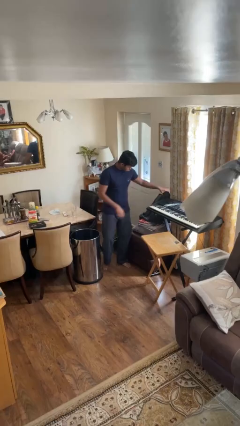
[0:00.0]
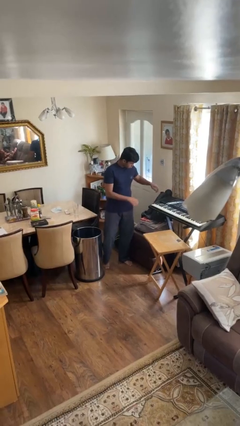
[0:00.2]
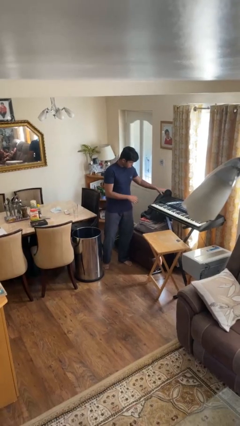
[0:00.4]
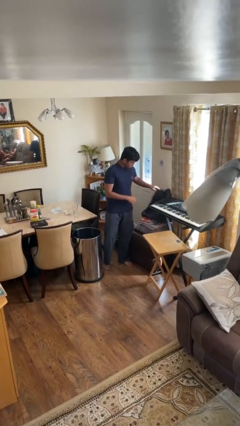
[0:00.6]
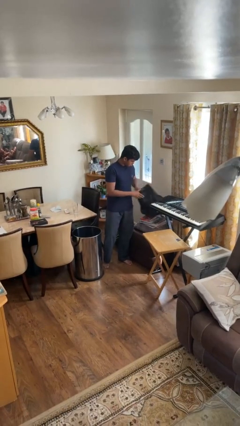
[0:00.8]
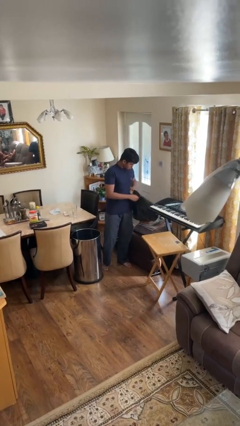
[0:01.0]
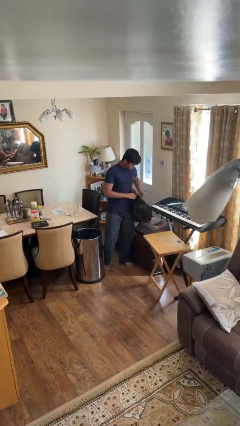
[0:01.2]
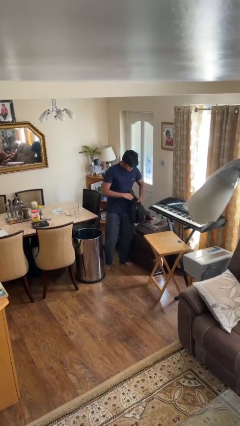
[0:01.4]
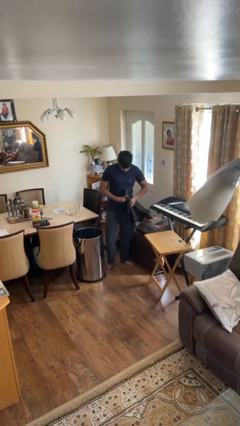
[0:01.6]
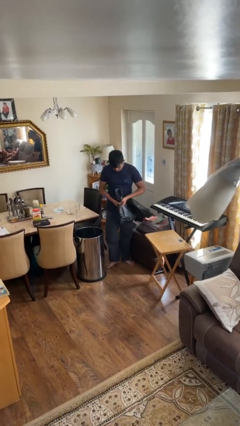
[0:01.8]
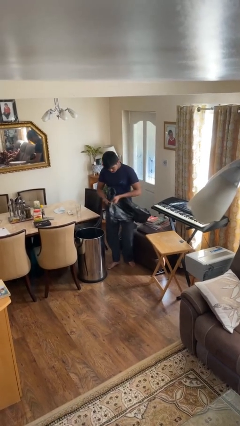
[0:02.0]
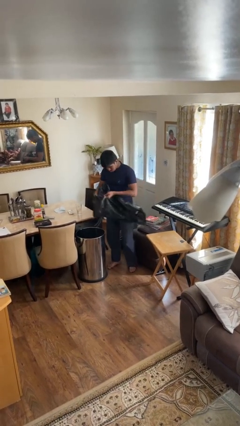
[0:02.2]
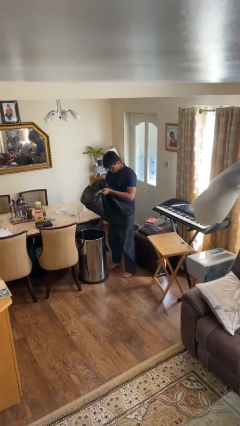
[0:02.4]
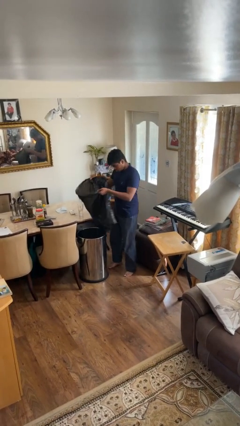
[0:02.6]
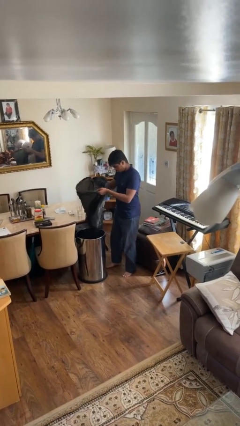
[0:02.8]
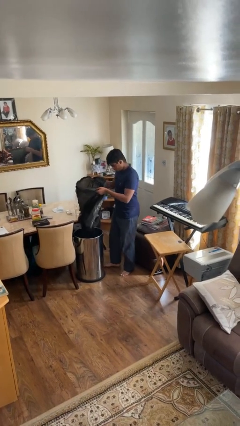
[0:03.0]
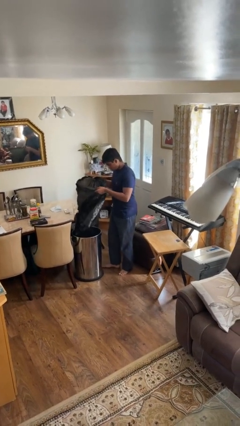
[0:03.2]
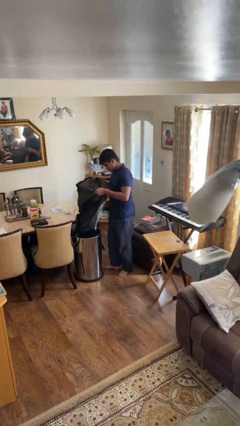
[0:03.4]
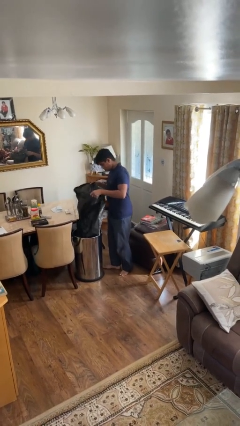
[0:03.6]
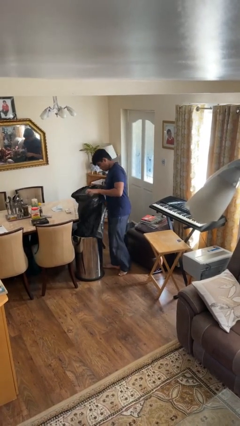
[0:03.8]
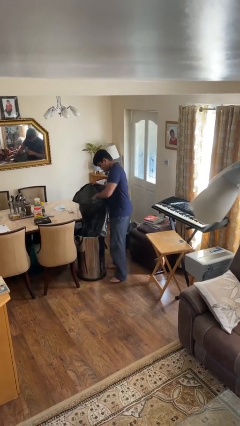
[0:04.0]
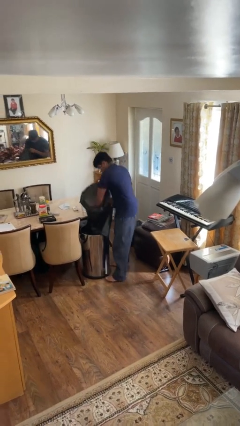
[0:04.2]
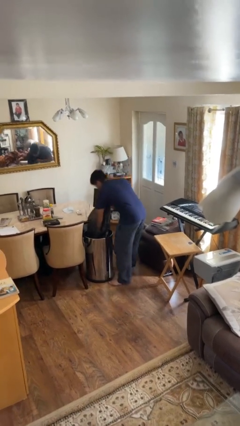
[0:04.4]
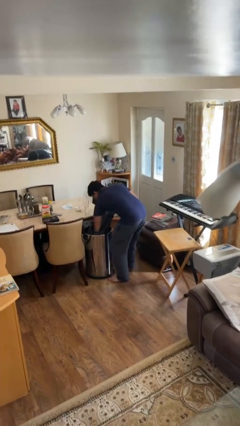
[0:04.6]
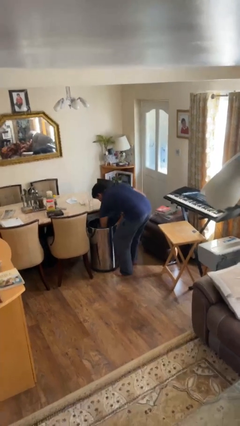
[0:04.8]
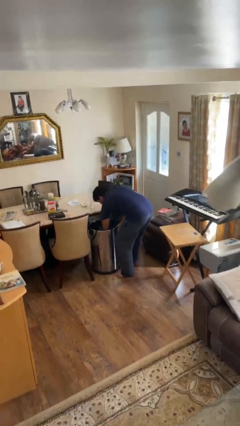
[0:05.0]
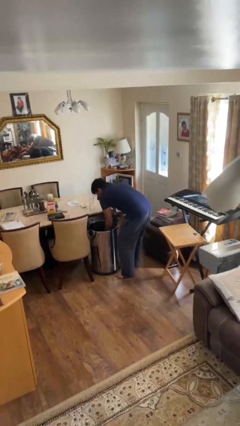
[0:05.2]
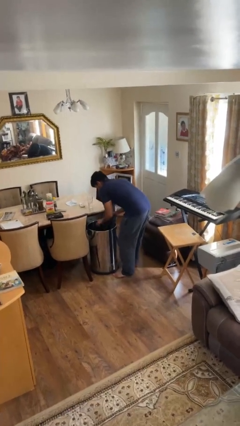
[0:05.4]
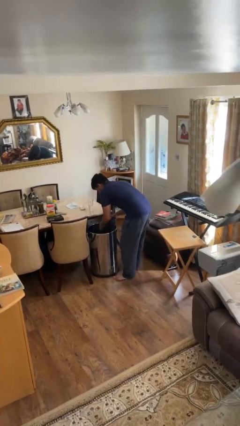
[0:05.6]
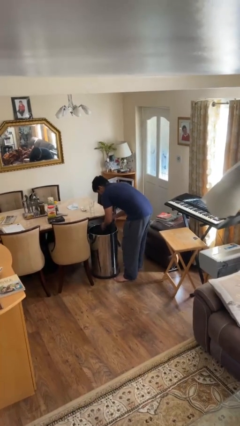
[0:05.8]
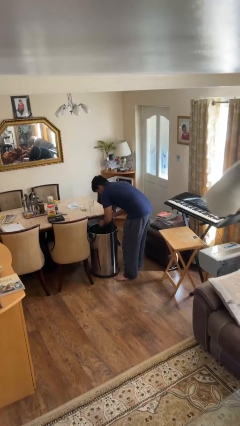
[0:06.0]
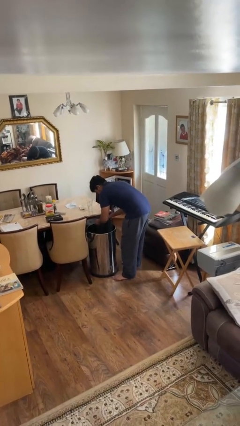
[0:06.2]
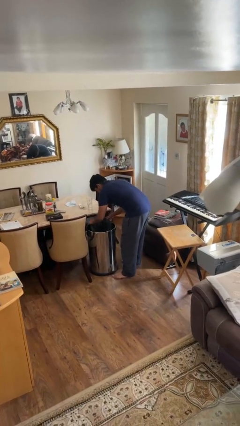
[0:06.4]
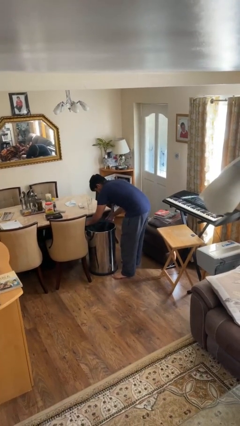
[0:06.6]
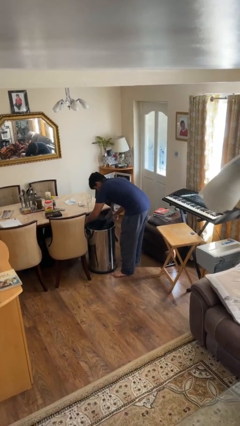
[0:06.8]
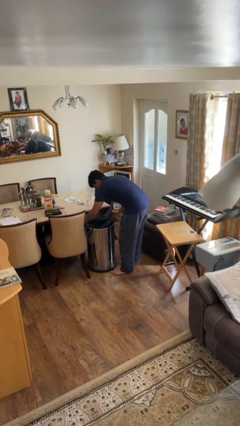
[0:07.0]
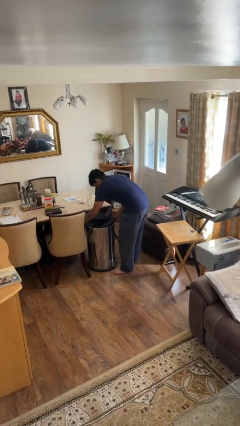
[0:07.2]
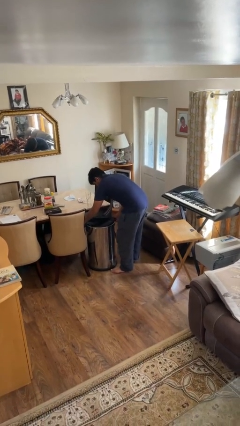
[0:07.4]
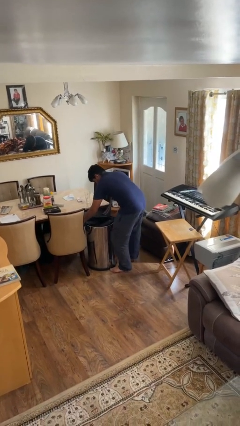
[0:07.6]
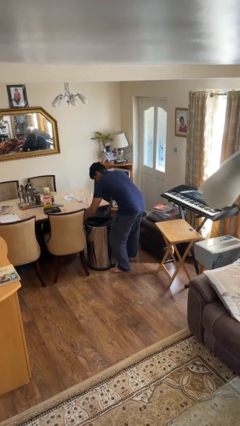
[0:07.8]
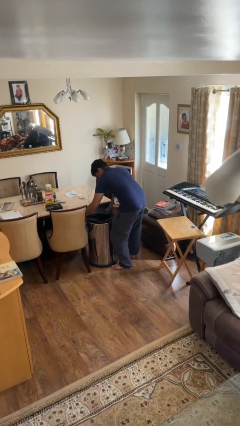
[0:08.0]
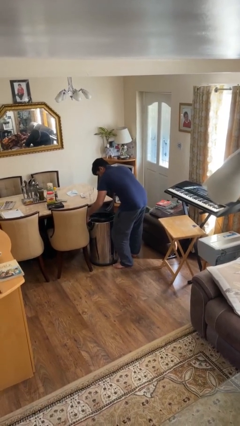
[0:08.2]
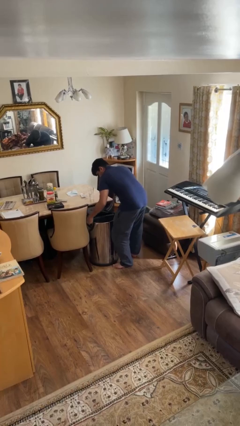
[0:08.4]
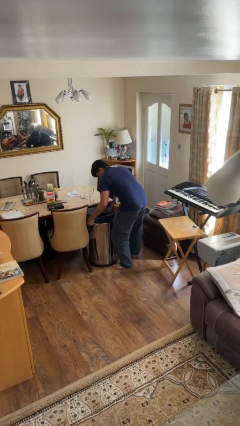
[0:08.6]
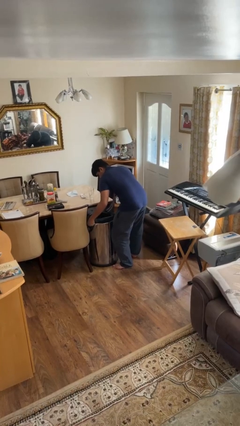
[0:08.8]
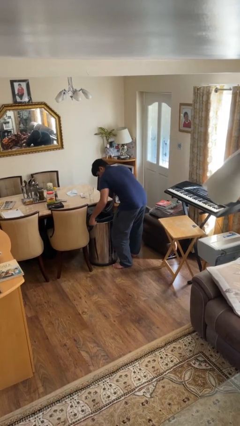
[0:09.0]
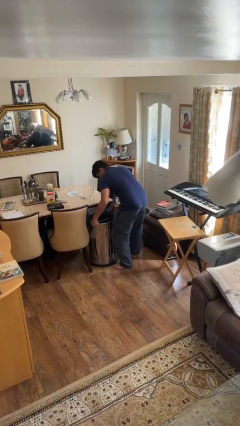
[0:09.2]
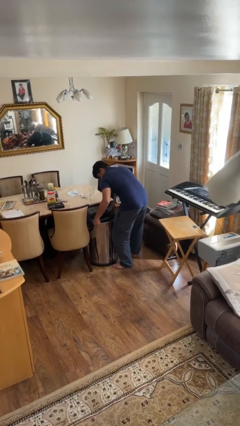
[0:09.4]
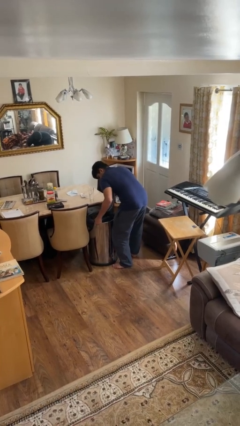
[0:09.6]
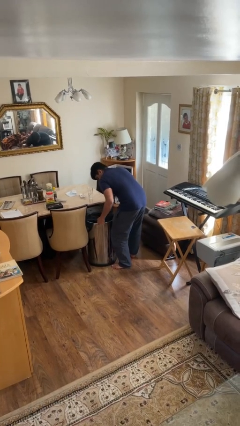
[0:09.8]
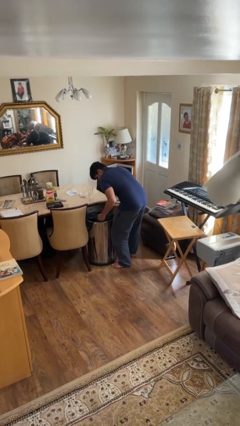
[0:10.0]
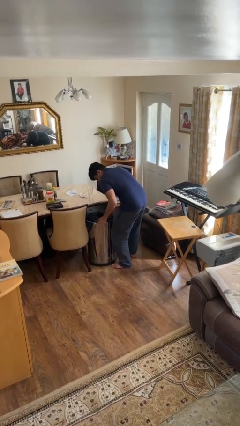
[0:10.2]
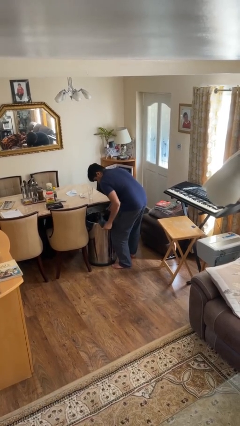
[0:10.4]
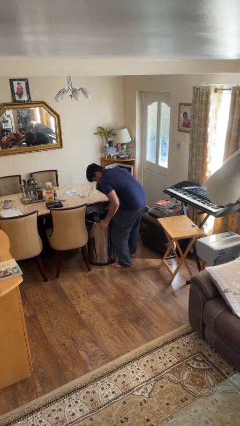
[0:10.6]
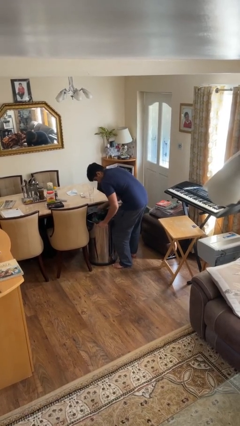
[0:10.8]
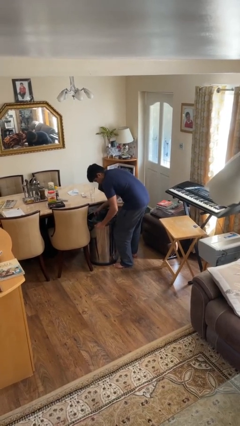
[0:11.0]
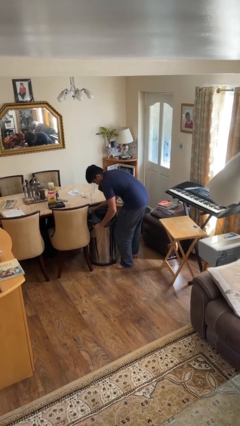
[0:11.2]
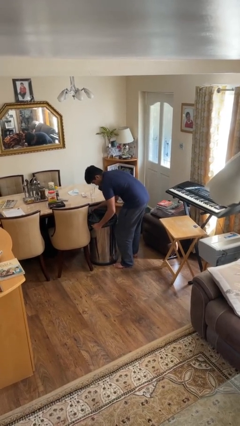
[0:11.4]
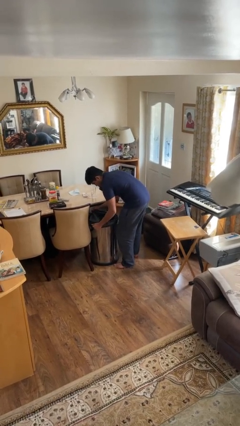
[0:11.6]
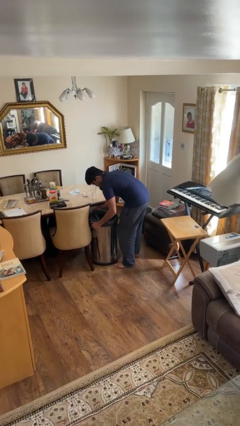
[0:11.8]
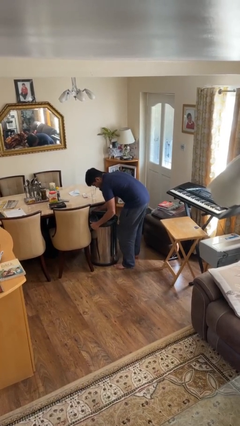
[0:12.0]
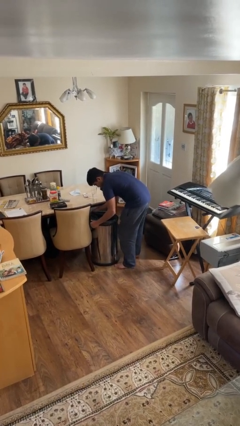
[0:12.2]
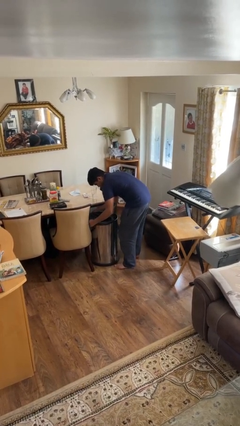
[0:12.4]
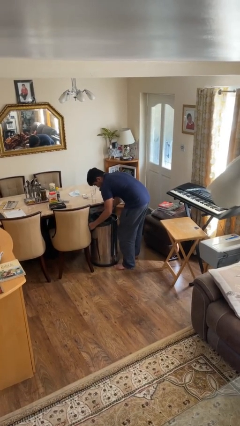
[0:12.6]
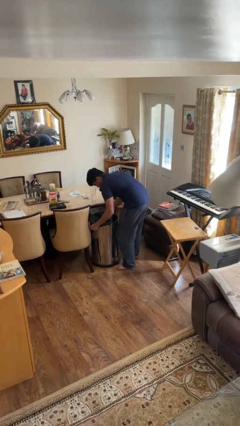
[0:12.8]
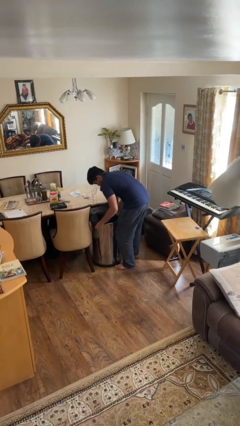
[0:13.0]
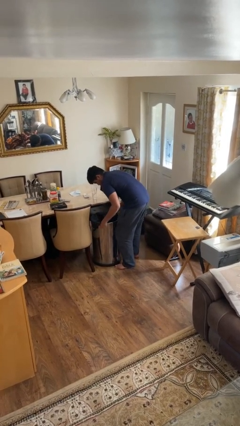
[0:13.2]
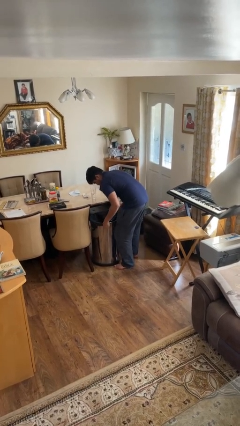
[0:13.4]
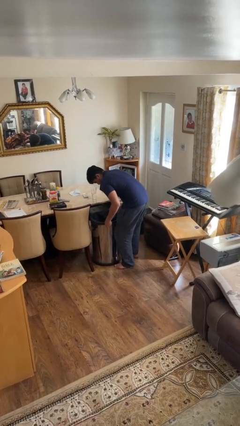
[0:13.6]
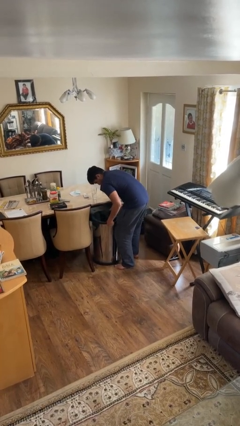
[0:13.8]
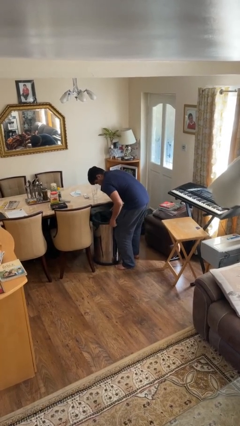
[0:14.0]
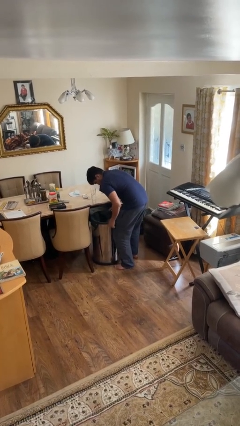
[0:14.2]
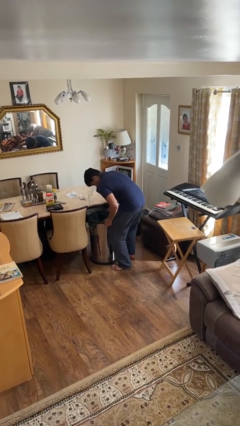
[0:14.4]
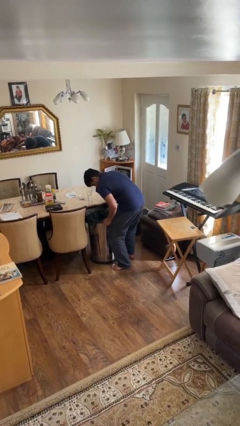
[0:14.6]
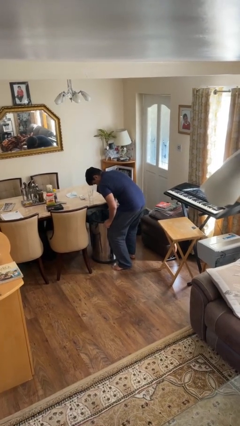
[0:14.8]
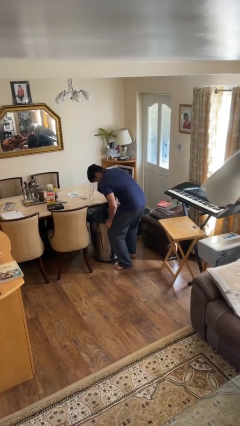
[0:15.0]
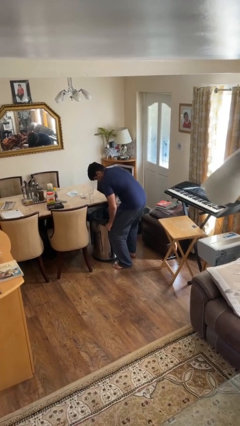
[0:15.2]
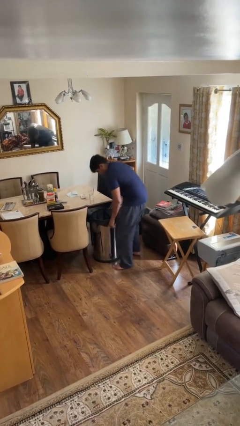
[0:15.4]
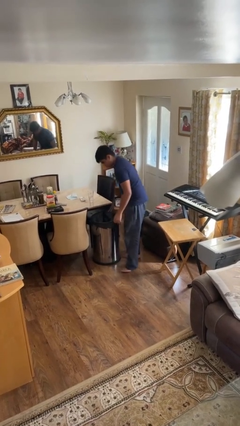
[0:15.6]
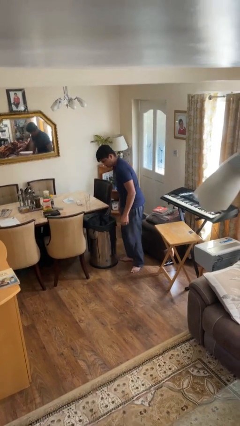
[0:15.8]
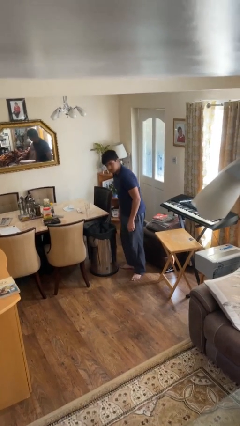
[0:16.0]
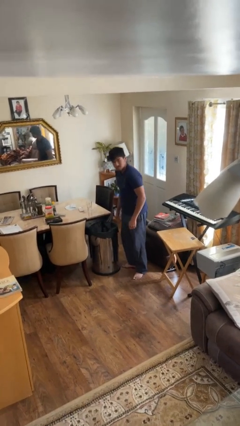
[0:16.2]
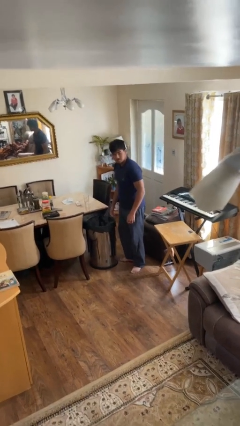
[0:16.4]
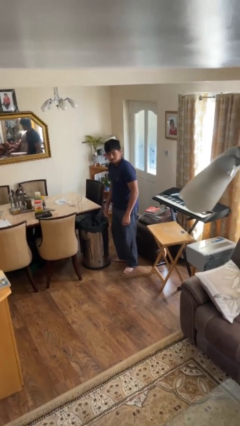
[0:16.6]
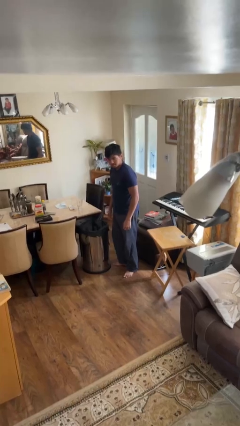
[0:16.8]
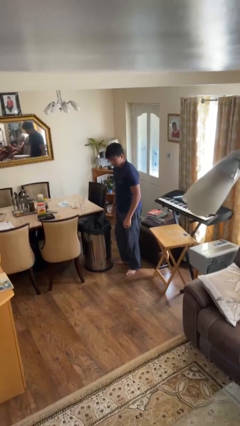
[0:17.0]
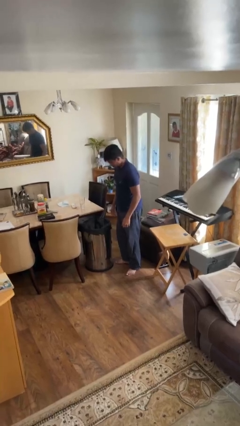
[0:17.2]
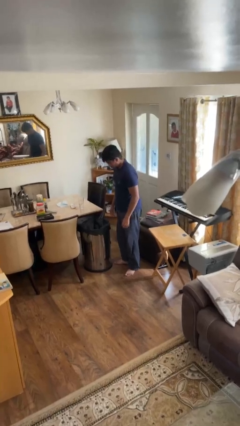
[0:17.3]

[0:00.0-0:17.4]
person inserts trashbag into trashcan

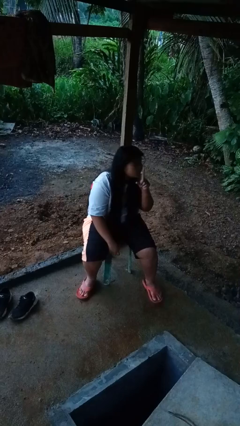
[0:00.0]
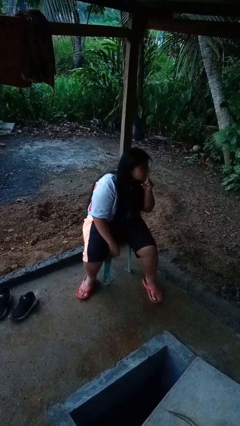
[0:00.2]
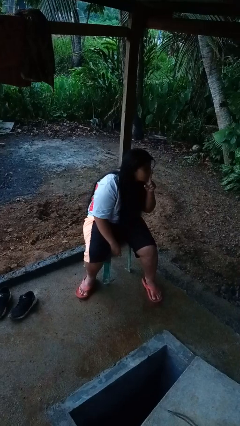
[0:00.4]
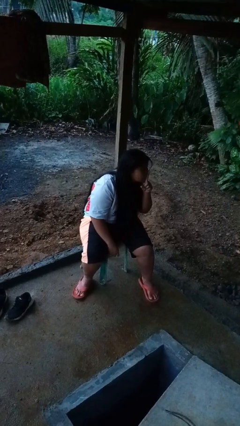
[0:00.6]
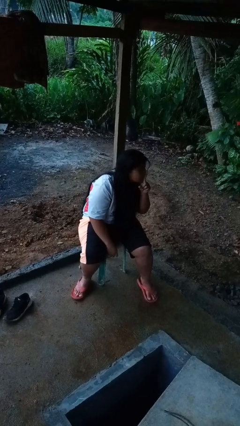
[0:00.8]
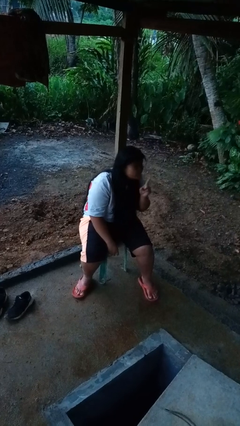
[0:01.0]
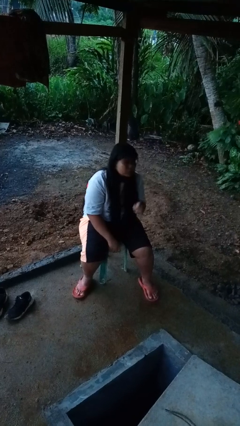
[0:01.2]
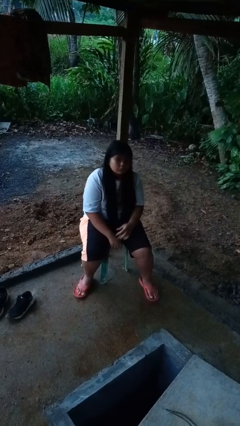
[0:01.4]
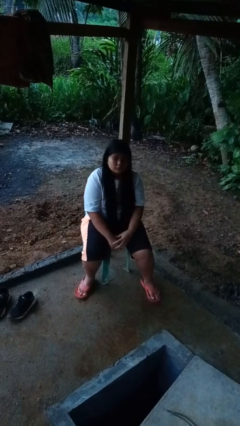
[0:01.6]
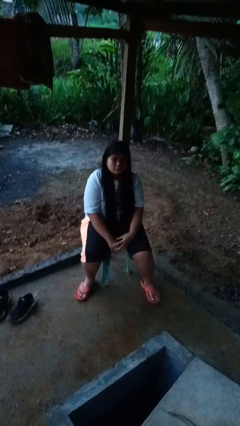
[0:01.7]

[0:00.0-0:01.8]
person gestures be quiet
